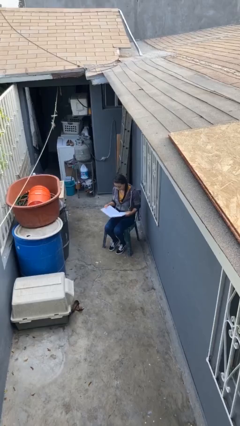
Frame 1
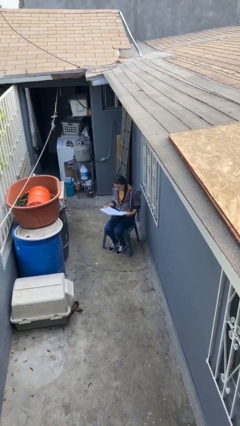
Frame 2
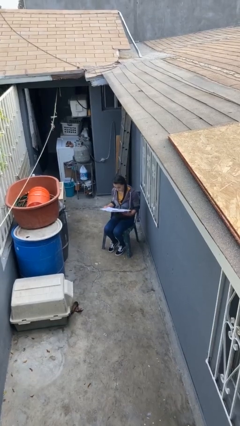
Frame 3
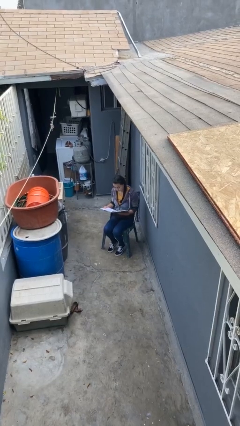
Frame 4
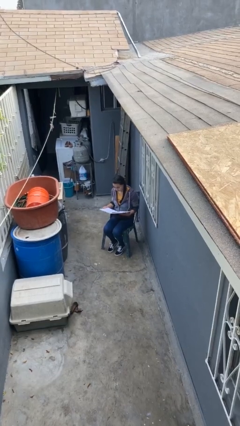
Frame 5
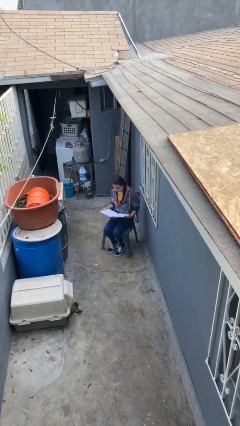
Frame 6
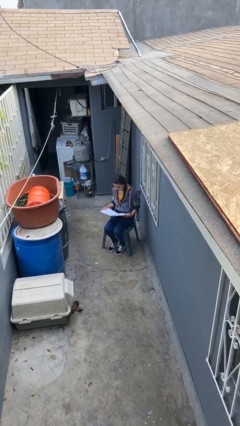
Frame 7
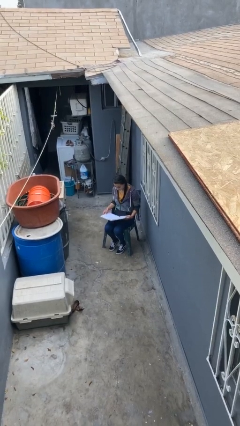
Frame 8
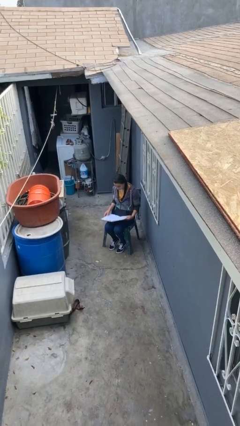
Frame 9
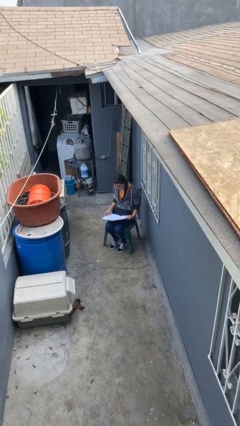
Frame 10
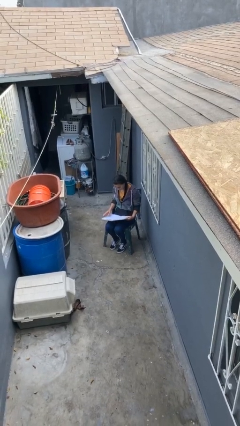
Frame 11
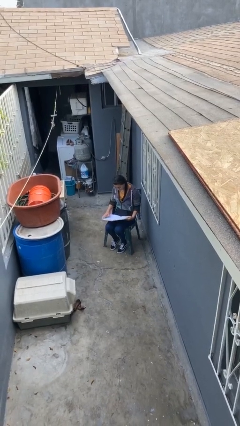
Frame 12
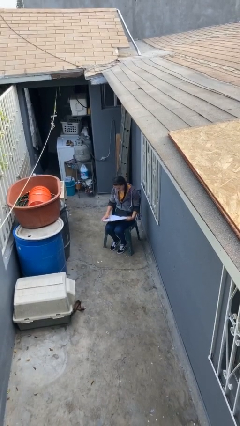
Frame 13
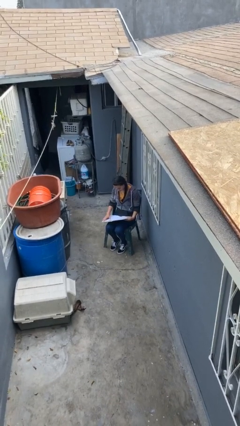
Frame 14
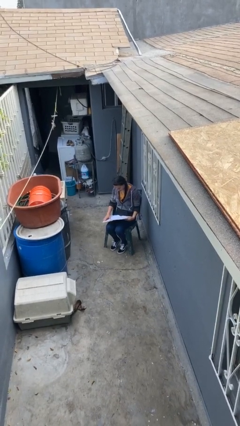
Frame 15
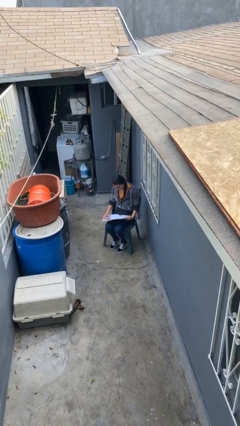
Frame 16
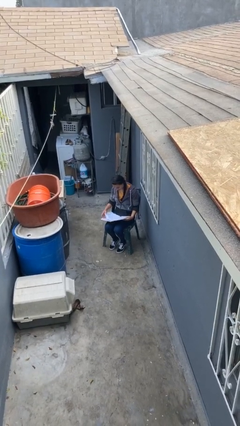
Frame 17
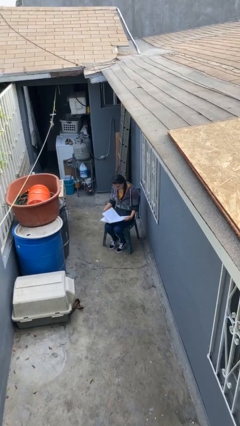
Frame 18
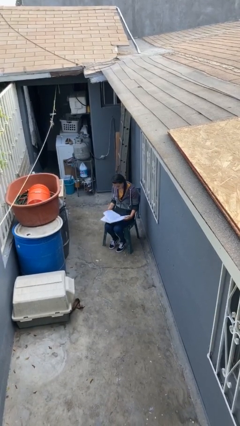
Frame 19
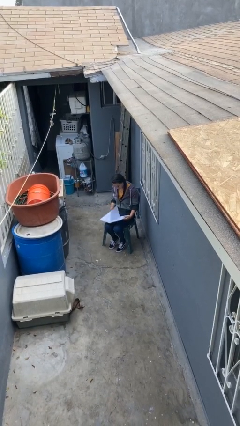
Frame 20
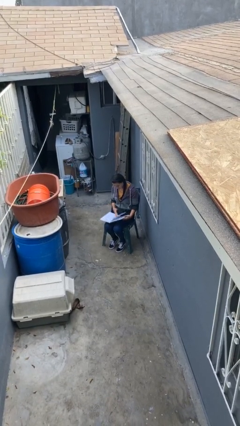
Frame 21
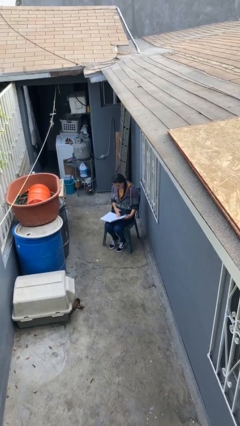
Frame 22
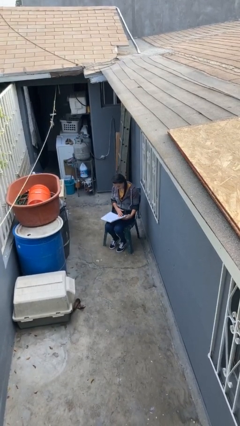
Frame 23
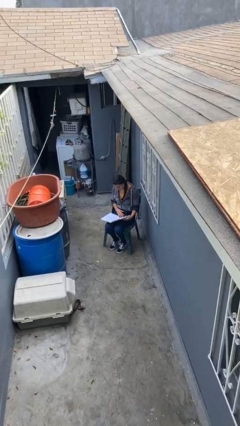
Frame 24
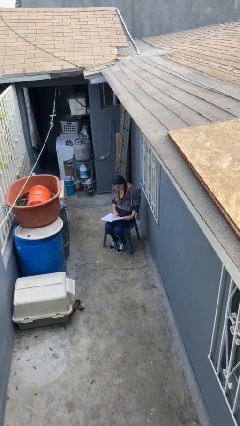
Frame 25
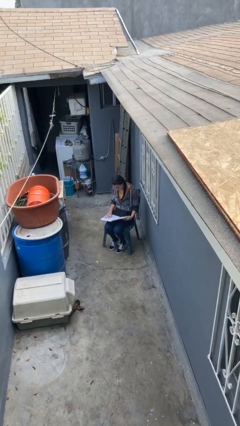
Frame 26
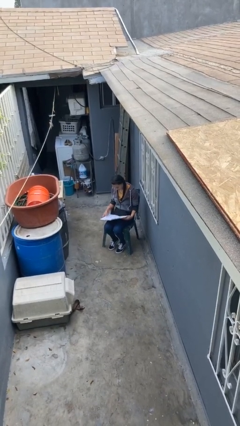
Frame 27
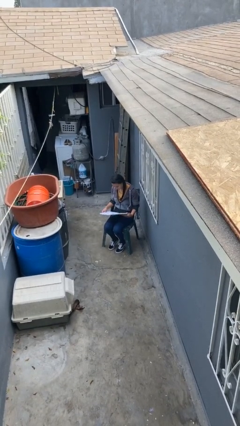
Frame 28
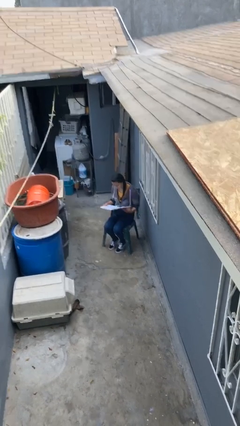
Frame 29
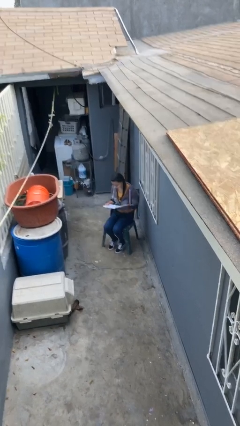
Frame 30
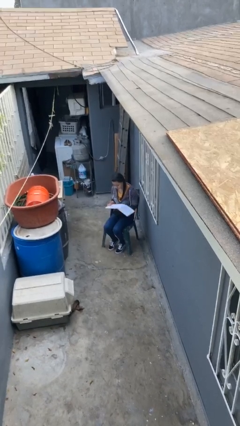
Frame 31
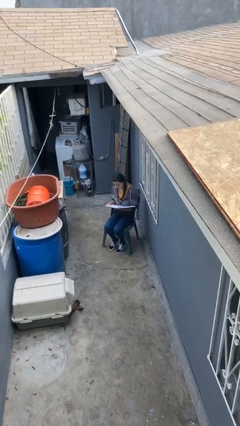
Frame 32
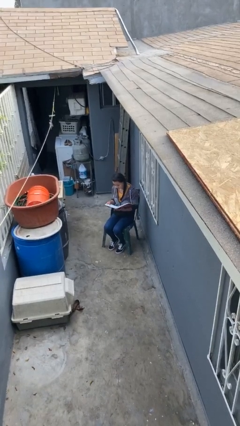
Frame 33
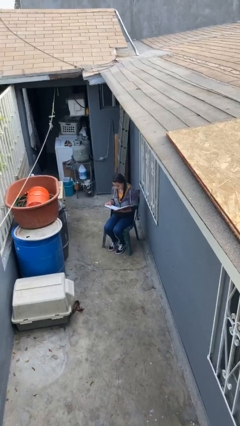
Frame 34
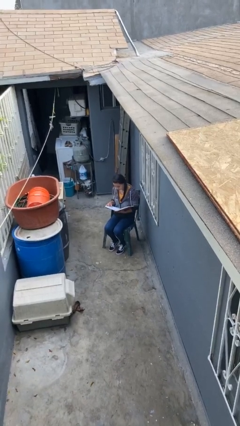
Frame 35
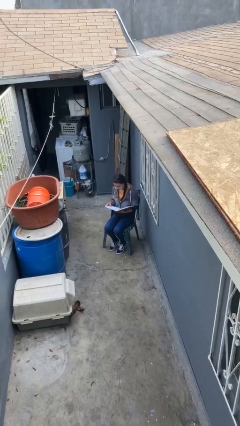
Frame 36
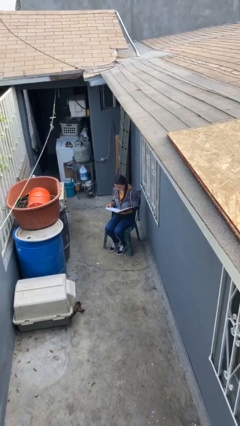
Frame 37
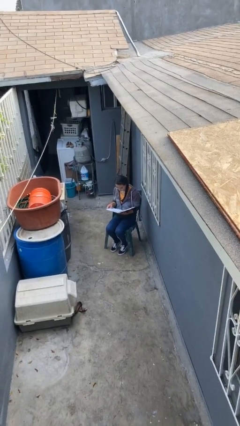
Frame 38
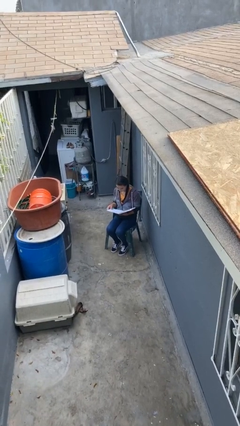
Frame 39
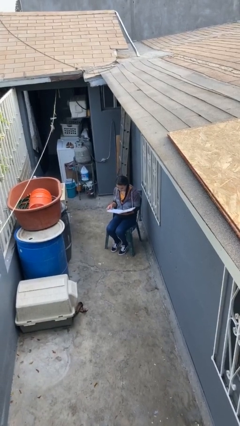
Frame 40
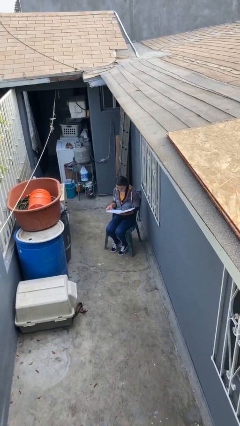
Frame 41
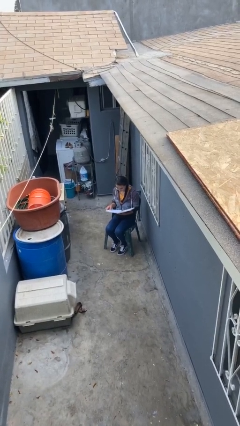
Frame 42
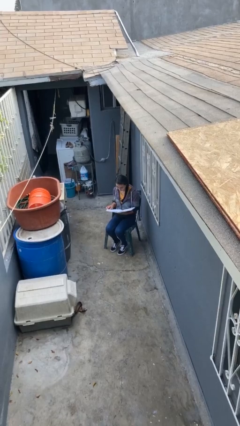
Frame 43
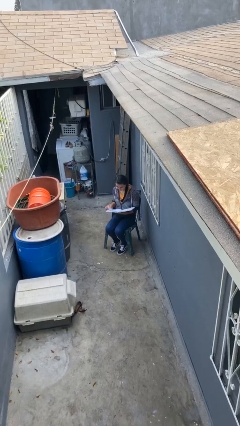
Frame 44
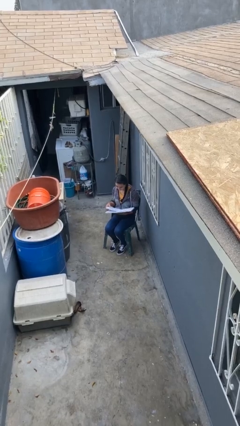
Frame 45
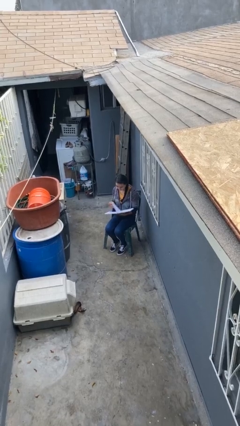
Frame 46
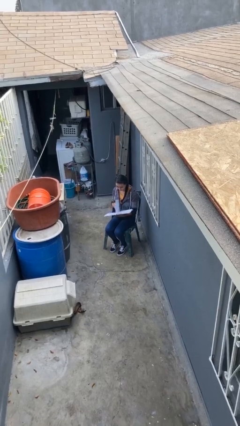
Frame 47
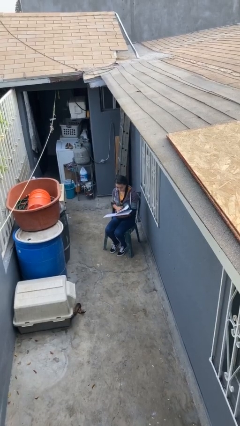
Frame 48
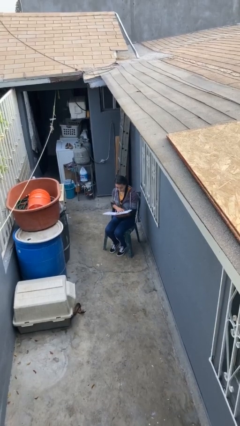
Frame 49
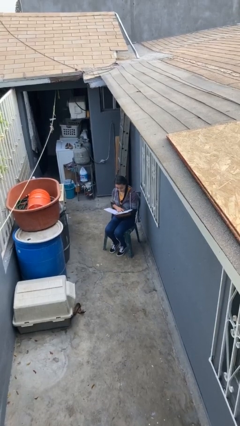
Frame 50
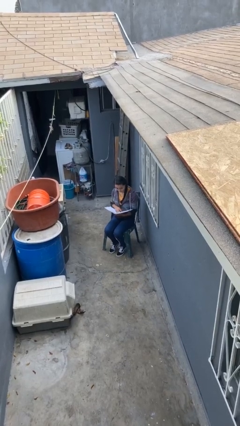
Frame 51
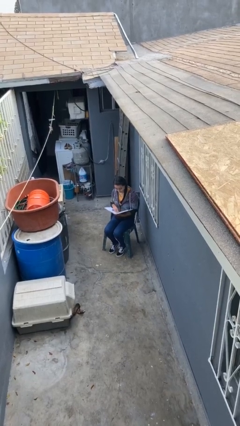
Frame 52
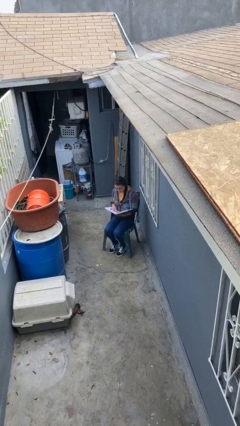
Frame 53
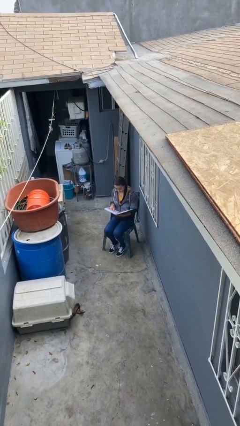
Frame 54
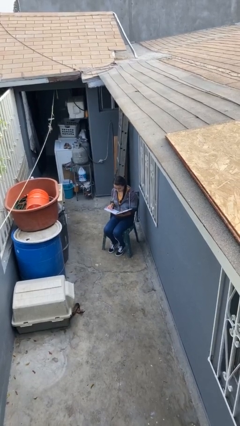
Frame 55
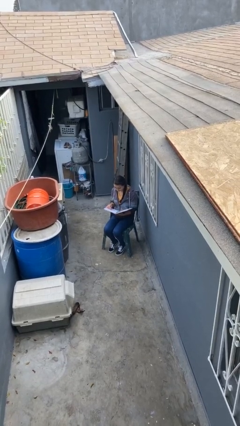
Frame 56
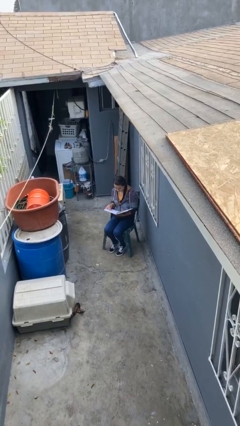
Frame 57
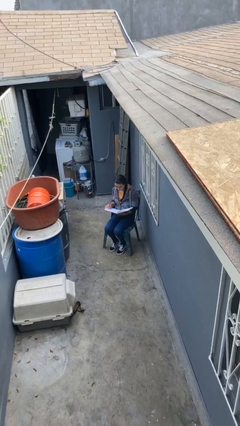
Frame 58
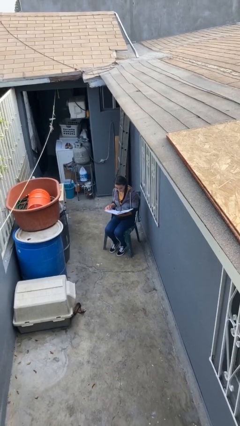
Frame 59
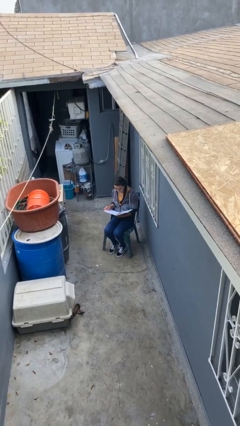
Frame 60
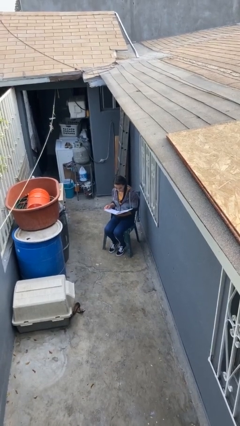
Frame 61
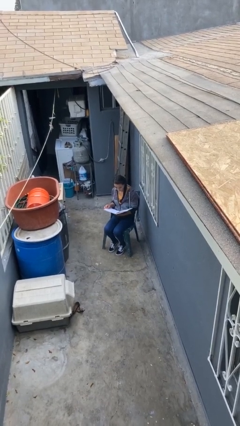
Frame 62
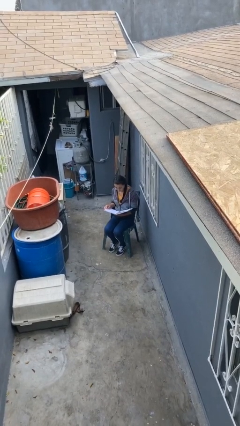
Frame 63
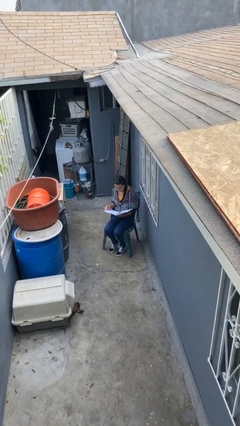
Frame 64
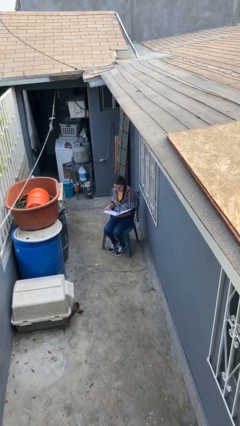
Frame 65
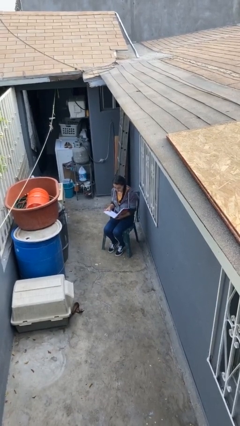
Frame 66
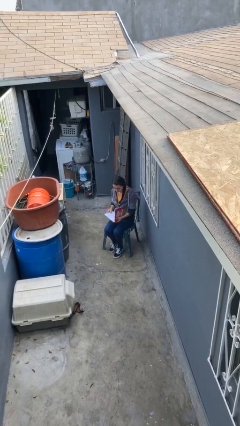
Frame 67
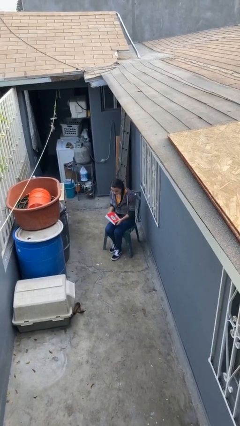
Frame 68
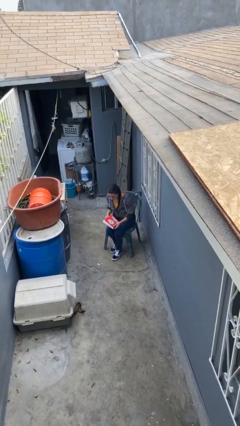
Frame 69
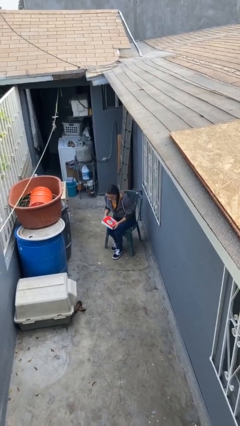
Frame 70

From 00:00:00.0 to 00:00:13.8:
person reads document

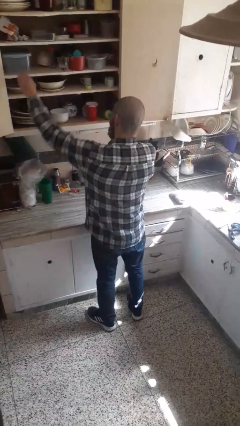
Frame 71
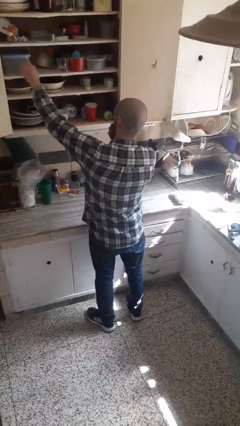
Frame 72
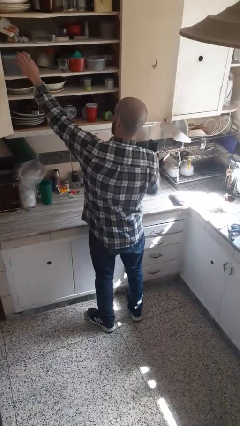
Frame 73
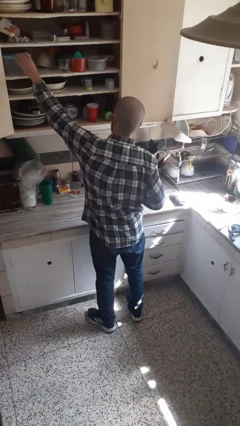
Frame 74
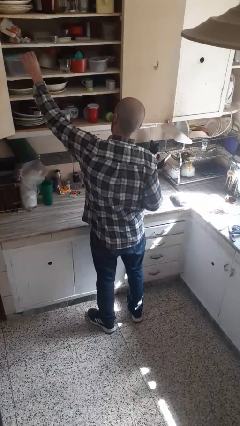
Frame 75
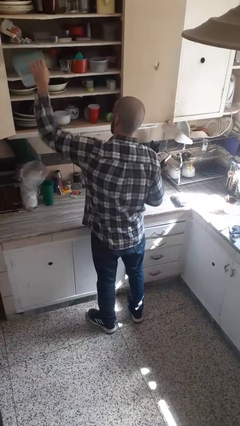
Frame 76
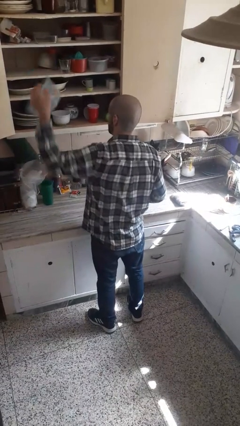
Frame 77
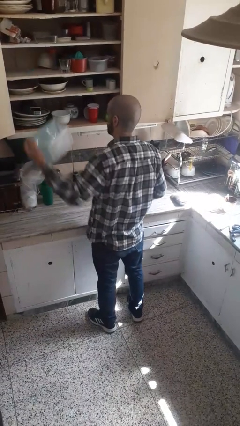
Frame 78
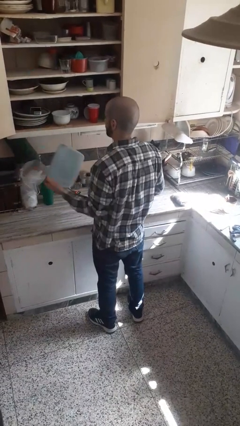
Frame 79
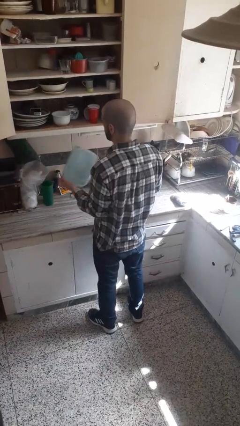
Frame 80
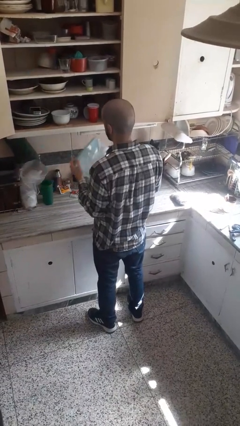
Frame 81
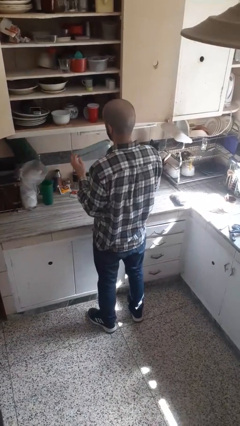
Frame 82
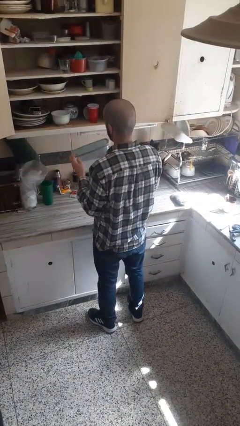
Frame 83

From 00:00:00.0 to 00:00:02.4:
person picks up object from cabinet

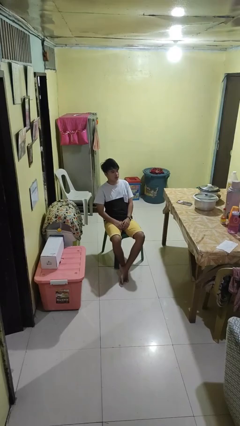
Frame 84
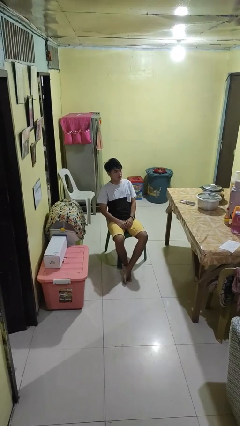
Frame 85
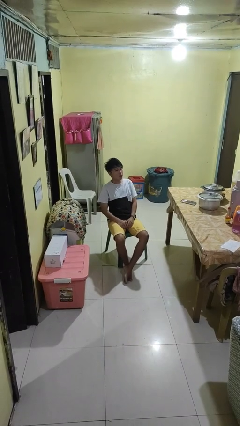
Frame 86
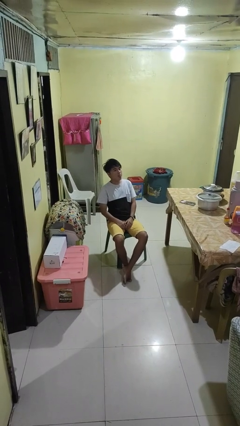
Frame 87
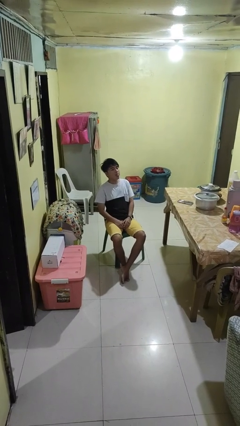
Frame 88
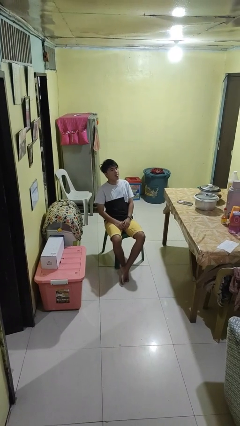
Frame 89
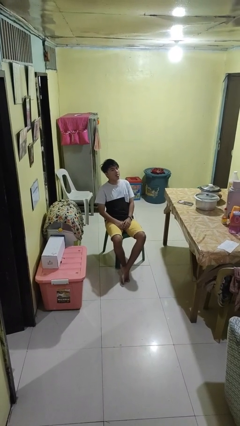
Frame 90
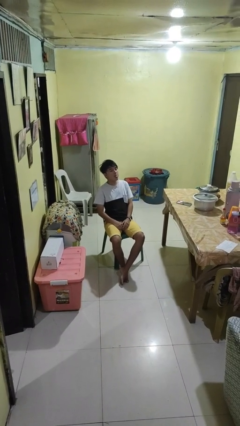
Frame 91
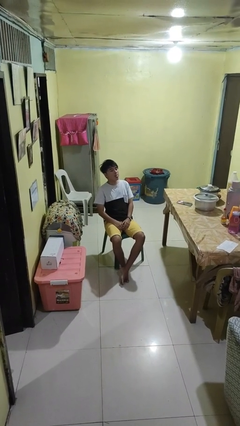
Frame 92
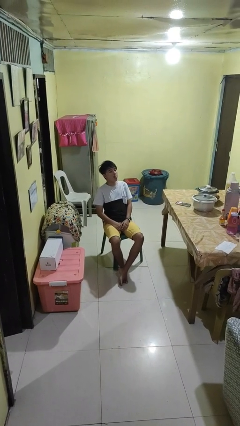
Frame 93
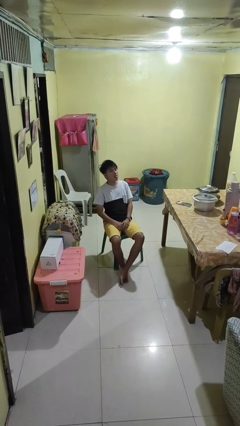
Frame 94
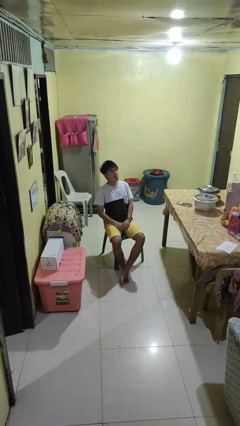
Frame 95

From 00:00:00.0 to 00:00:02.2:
person sticks out tongue
